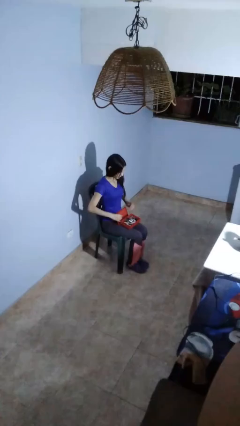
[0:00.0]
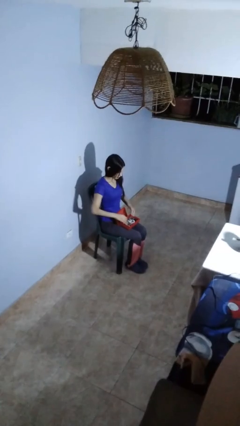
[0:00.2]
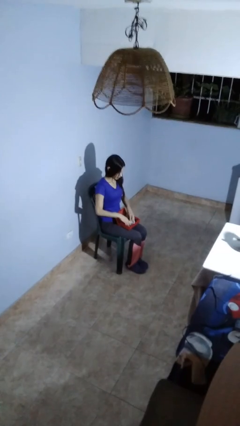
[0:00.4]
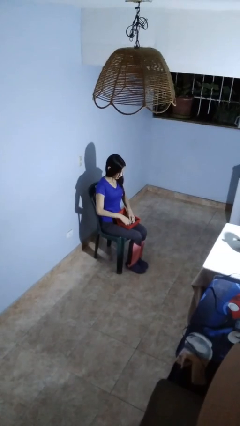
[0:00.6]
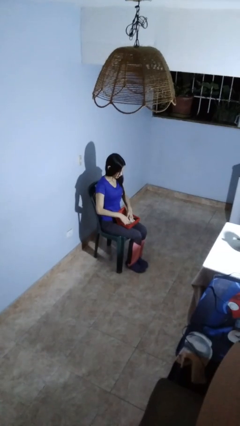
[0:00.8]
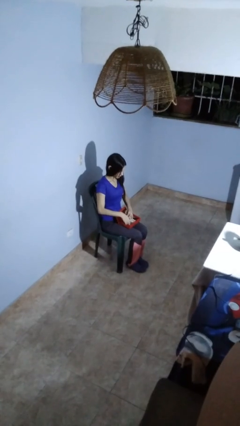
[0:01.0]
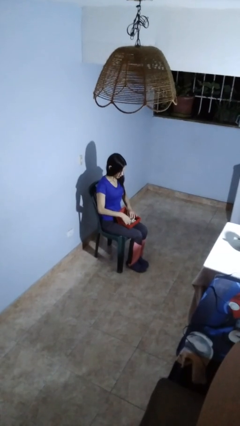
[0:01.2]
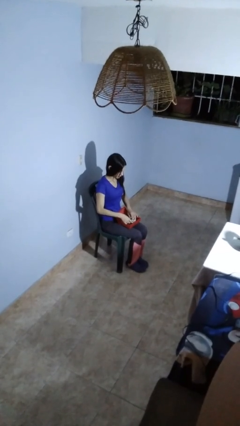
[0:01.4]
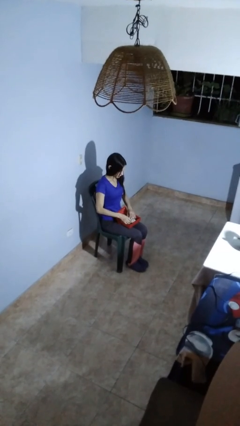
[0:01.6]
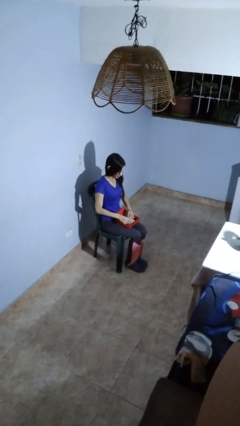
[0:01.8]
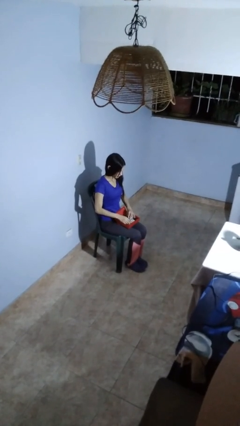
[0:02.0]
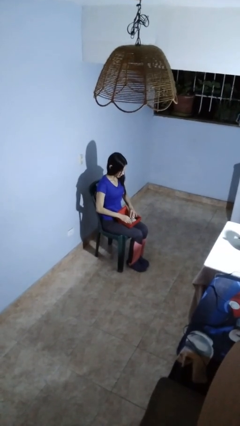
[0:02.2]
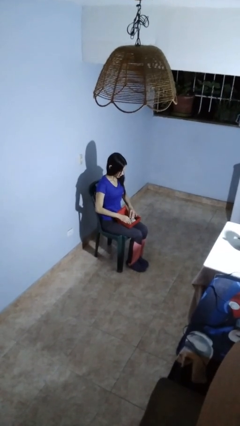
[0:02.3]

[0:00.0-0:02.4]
person searches jewelry box

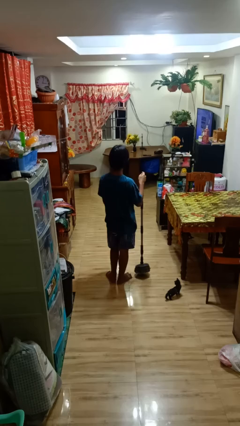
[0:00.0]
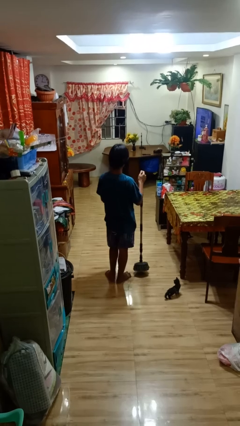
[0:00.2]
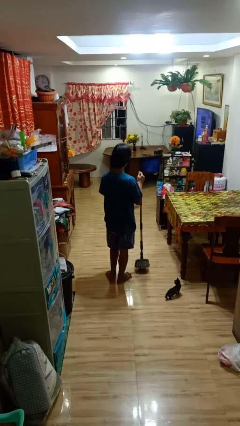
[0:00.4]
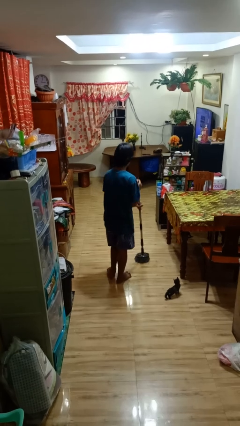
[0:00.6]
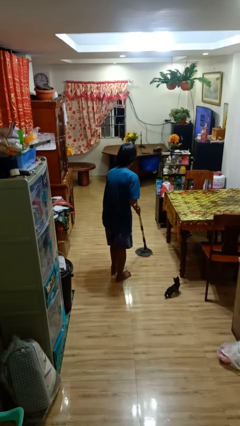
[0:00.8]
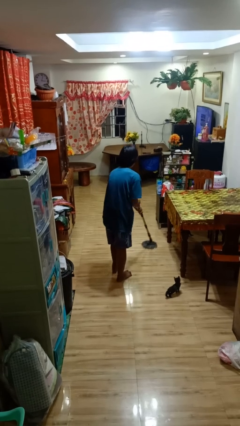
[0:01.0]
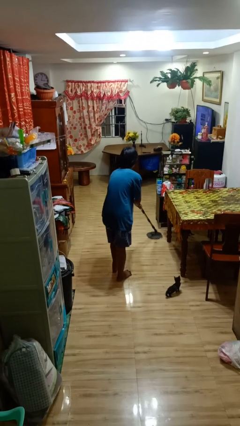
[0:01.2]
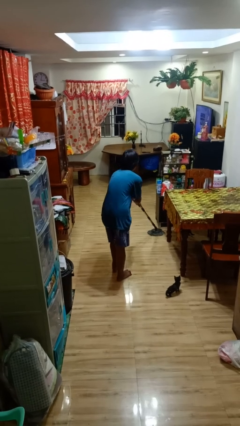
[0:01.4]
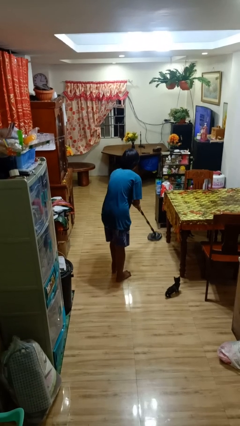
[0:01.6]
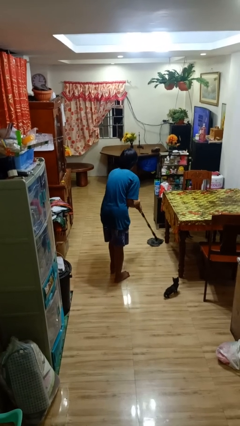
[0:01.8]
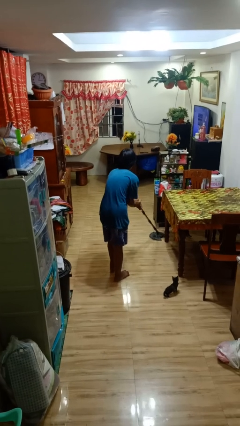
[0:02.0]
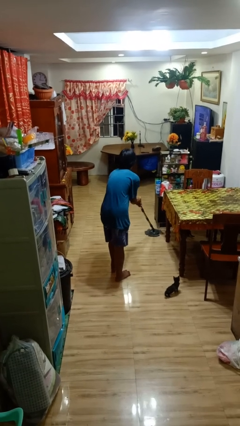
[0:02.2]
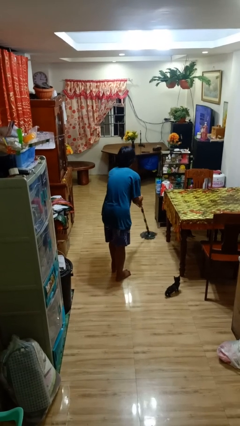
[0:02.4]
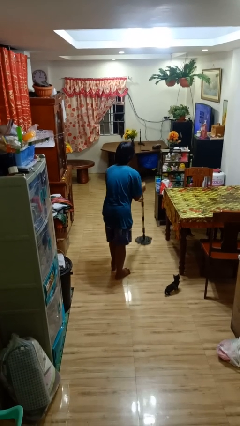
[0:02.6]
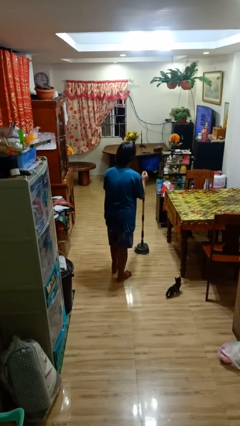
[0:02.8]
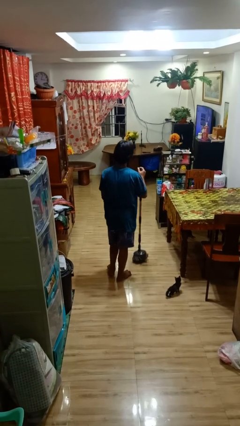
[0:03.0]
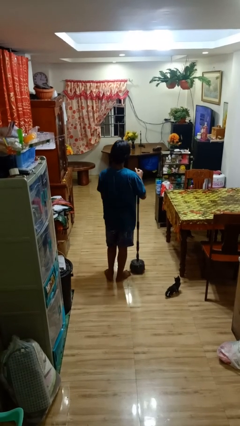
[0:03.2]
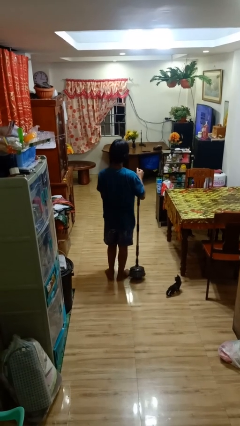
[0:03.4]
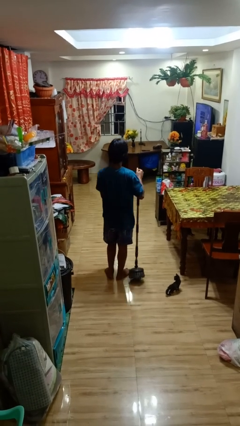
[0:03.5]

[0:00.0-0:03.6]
person mops

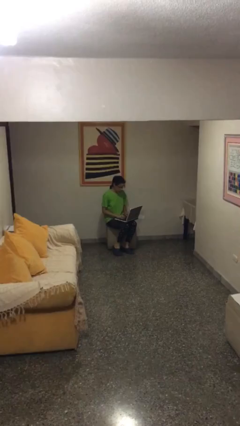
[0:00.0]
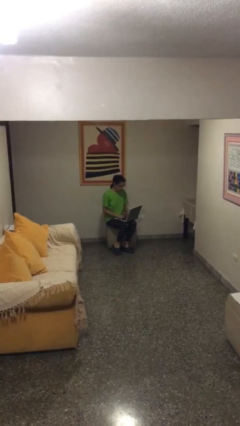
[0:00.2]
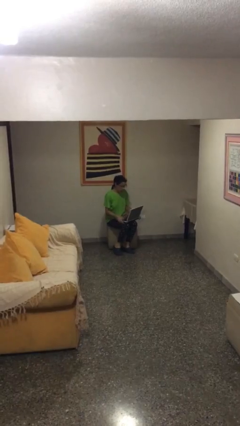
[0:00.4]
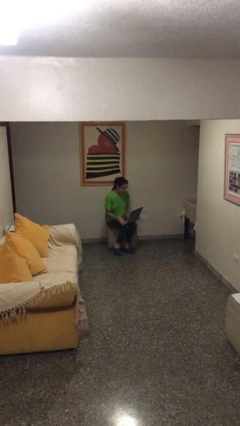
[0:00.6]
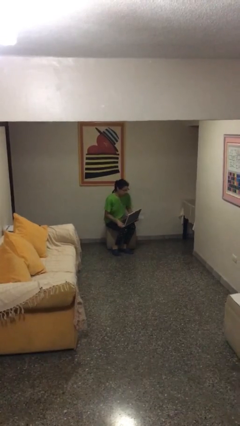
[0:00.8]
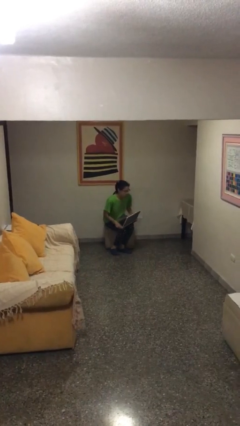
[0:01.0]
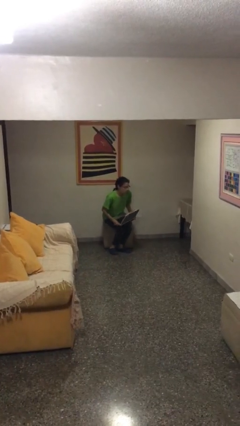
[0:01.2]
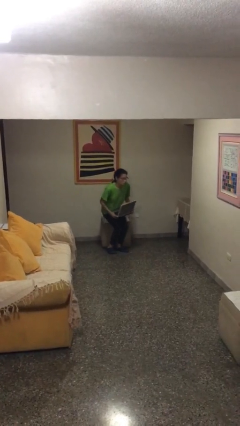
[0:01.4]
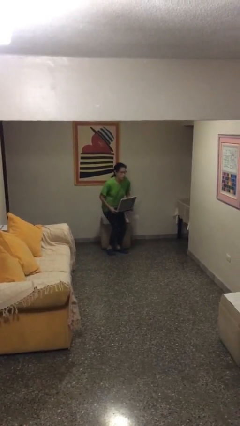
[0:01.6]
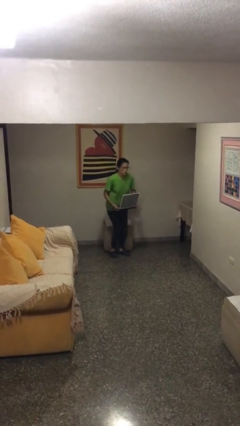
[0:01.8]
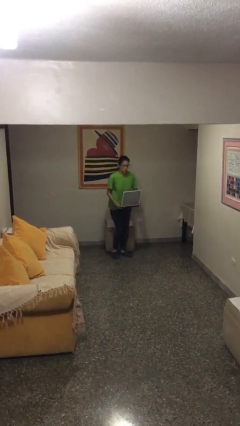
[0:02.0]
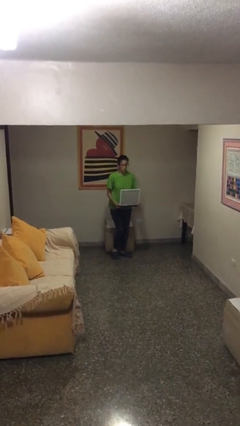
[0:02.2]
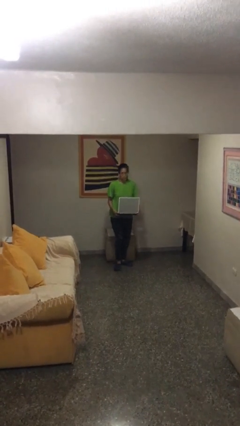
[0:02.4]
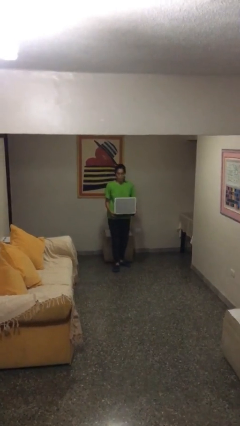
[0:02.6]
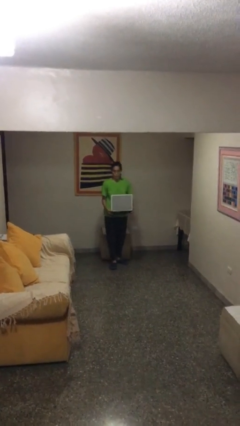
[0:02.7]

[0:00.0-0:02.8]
person stands up

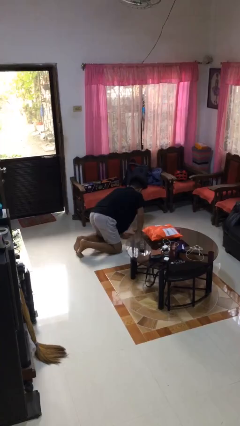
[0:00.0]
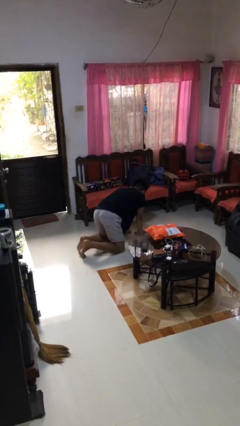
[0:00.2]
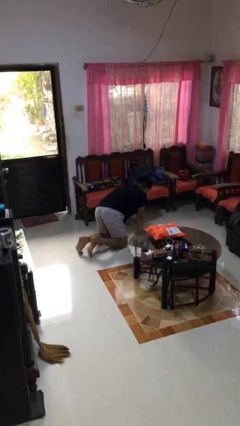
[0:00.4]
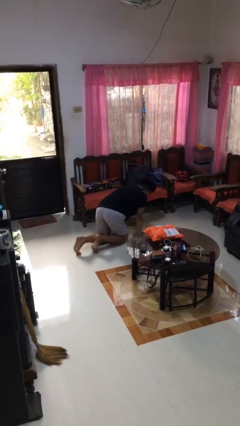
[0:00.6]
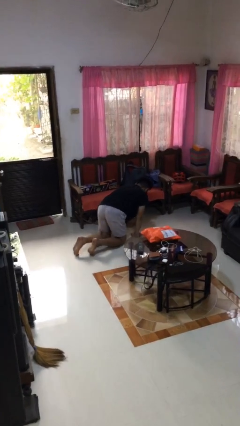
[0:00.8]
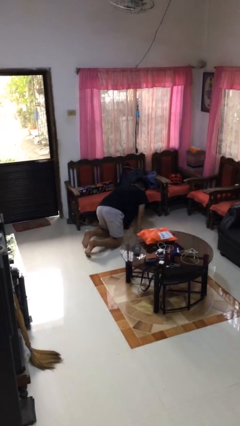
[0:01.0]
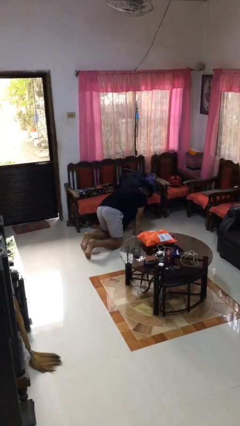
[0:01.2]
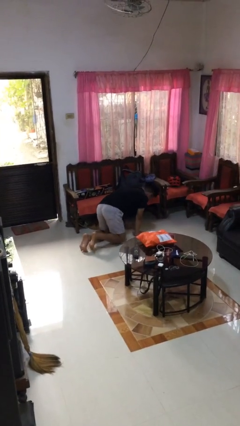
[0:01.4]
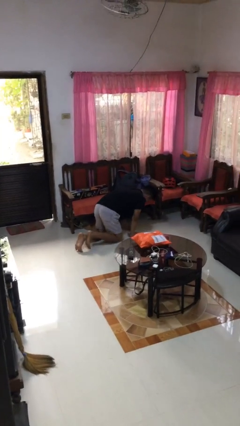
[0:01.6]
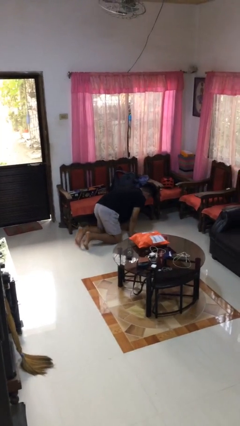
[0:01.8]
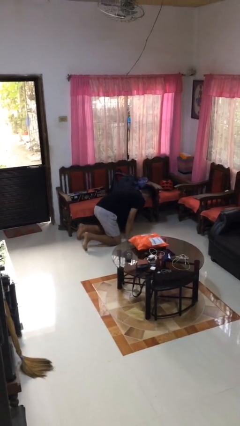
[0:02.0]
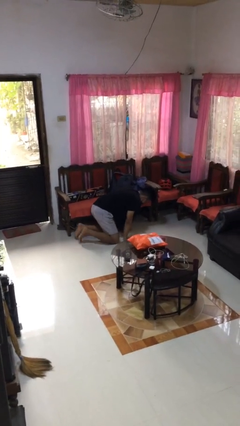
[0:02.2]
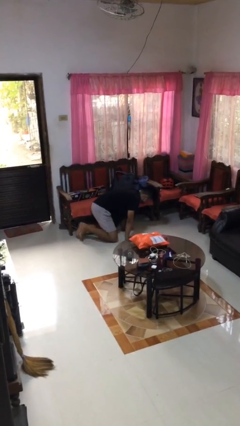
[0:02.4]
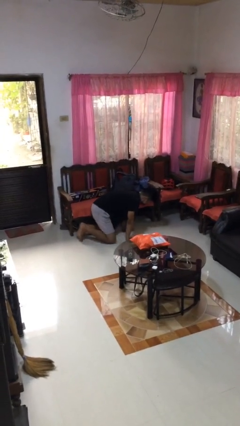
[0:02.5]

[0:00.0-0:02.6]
person crawls

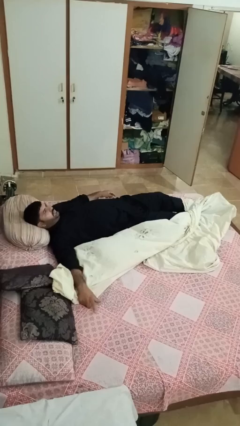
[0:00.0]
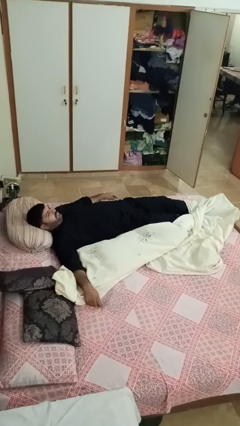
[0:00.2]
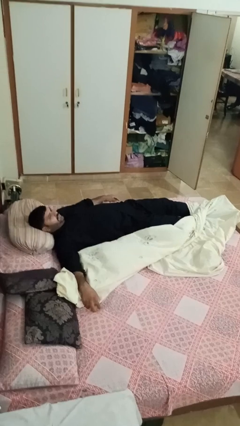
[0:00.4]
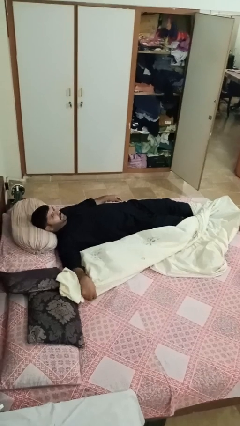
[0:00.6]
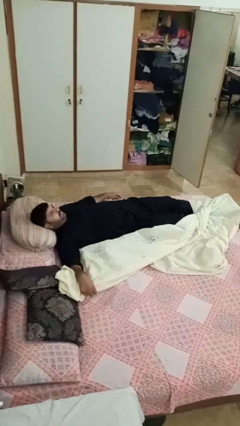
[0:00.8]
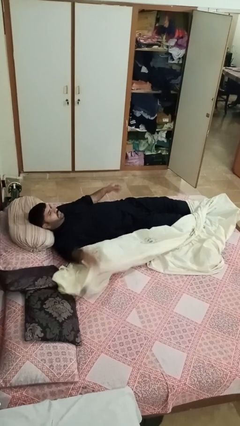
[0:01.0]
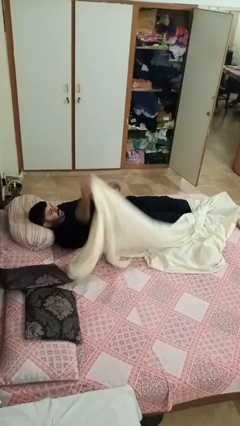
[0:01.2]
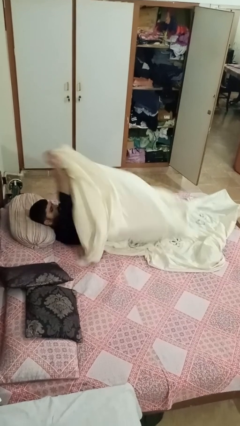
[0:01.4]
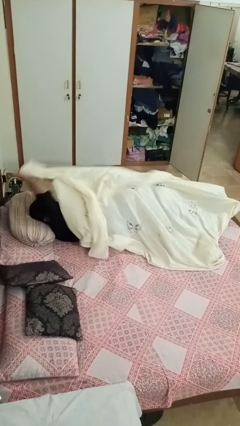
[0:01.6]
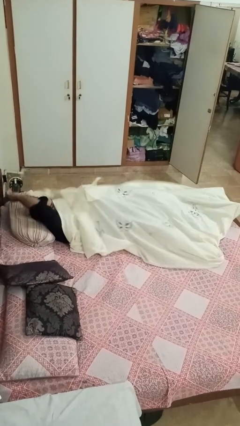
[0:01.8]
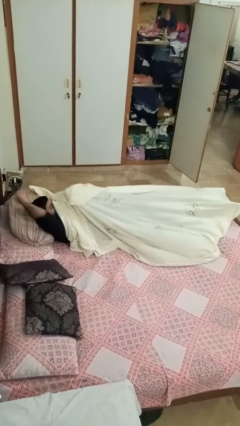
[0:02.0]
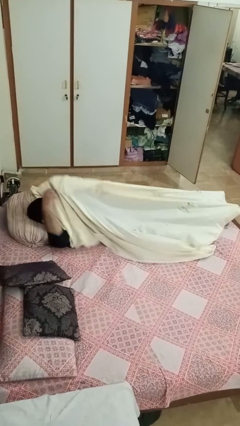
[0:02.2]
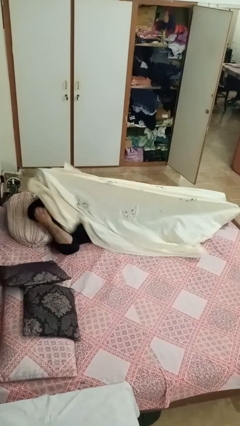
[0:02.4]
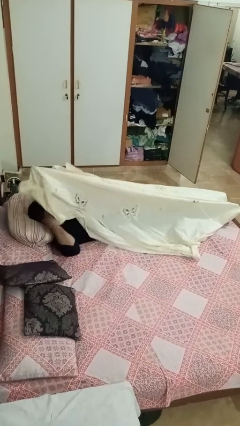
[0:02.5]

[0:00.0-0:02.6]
person covers with bedsheets

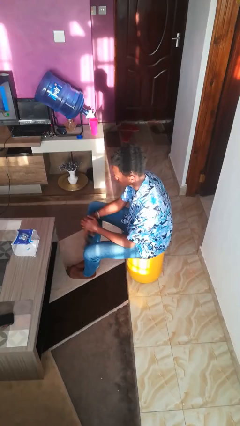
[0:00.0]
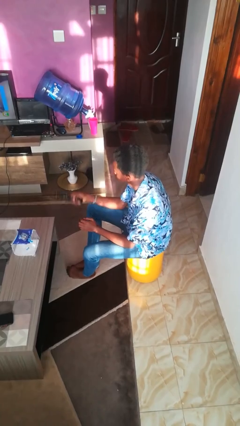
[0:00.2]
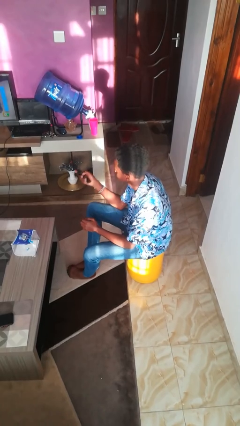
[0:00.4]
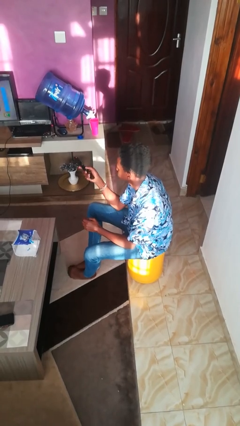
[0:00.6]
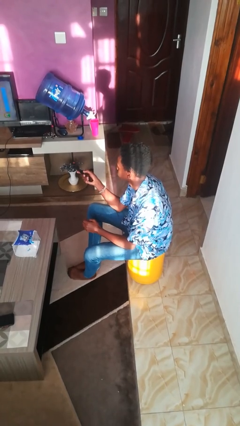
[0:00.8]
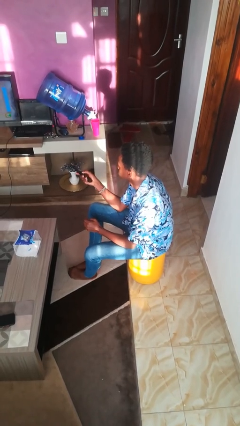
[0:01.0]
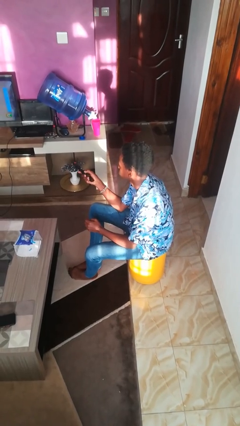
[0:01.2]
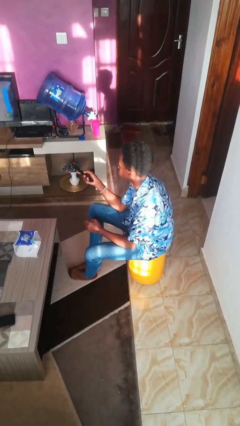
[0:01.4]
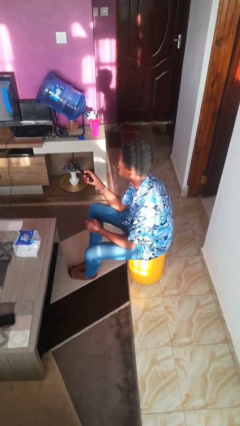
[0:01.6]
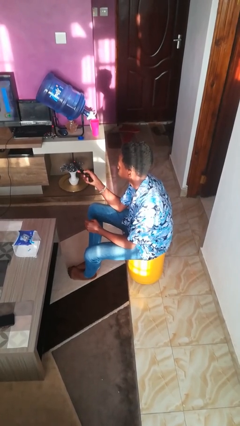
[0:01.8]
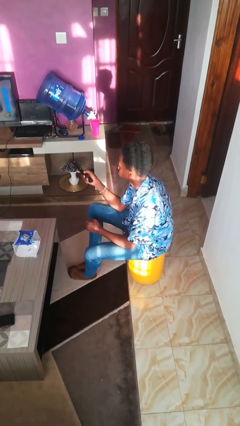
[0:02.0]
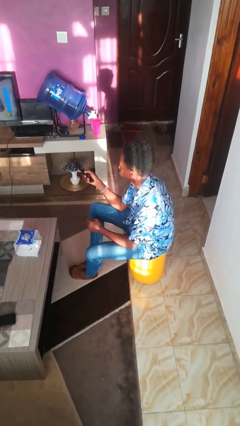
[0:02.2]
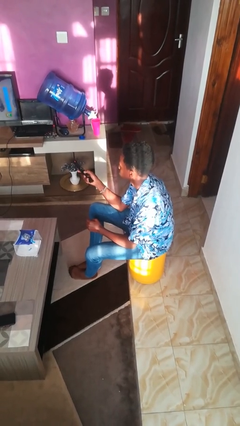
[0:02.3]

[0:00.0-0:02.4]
person uses television remote

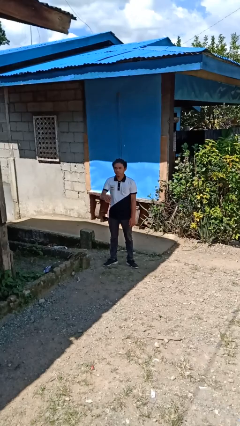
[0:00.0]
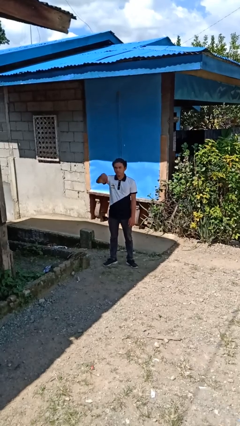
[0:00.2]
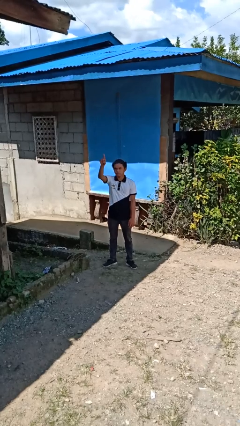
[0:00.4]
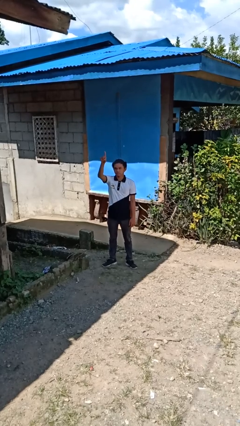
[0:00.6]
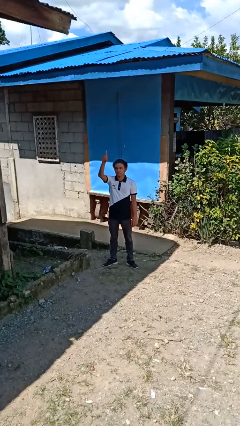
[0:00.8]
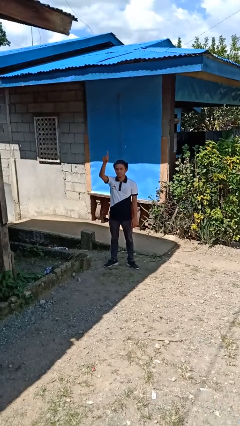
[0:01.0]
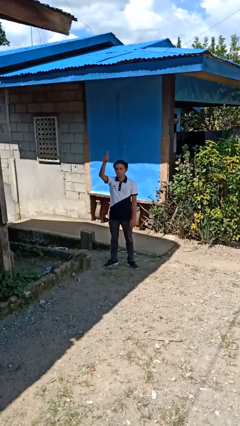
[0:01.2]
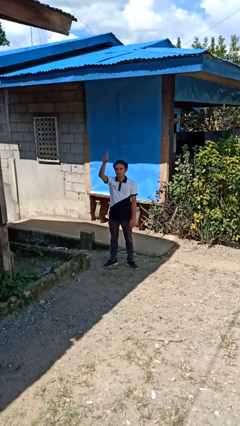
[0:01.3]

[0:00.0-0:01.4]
person gestures swipe up
